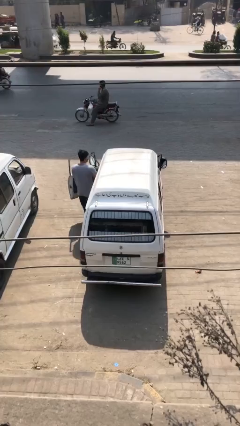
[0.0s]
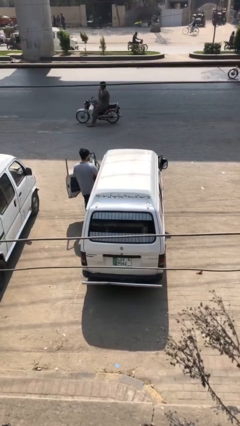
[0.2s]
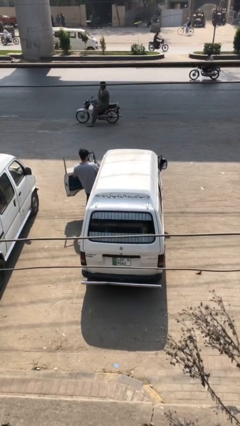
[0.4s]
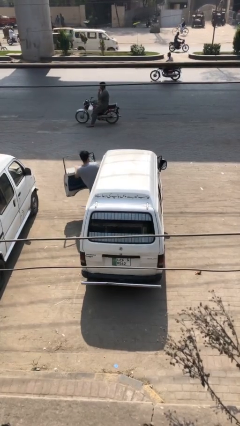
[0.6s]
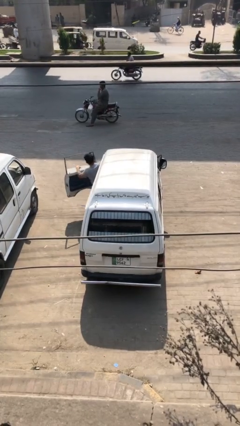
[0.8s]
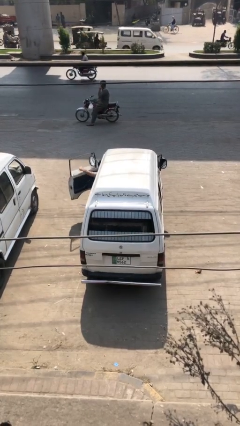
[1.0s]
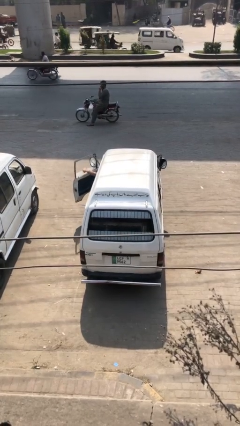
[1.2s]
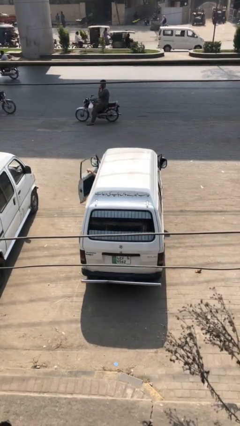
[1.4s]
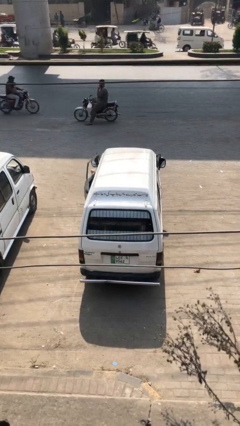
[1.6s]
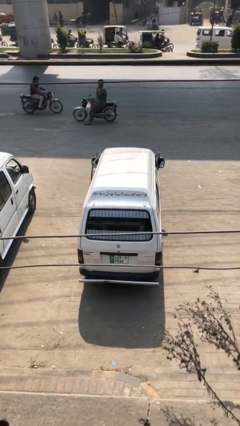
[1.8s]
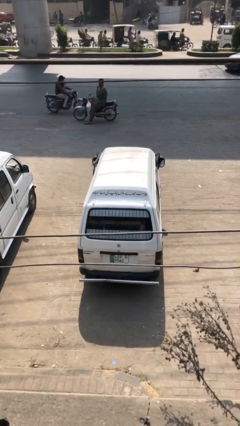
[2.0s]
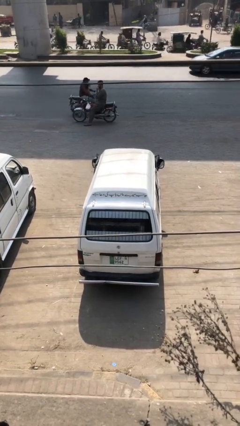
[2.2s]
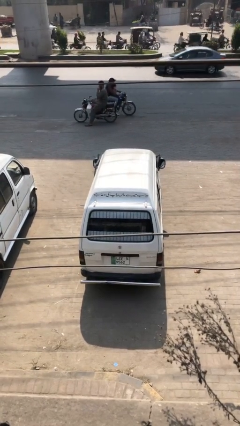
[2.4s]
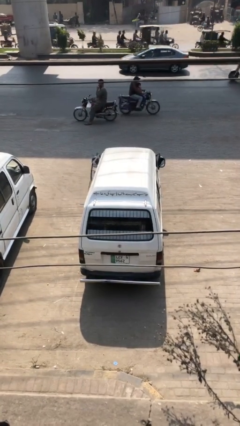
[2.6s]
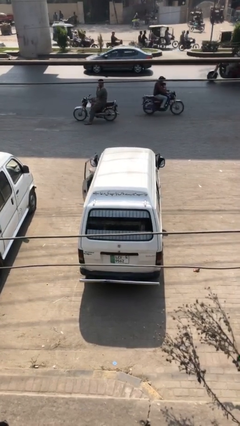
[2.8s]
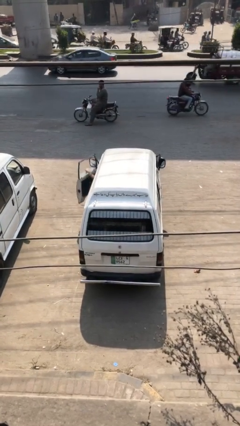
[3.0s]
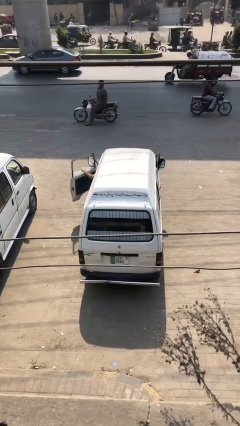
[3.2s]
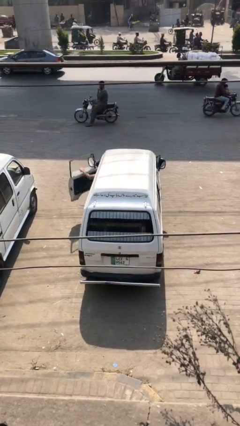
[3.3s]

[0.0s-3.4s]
car picks up person

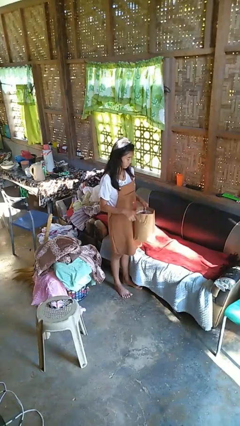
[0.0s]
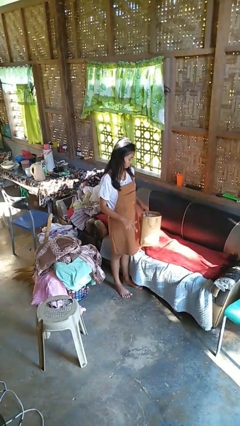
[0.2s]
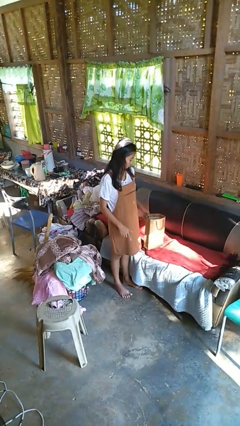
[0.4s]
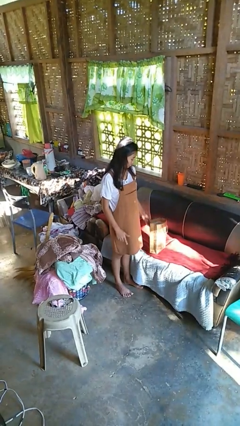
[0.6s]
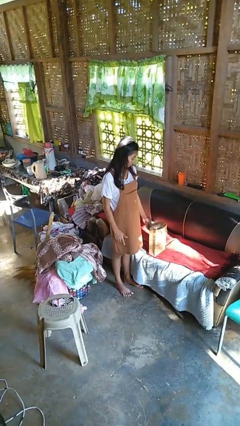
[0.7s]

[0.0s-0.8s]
person puts down object on couch

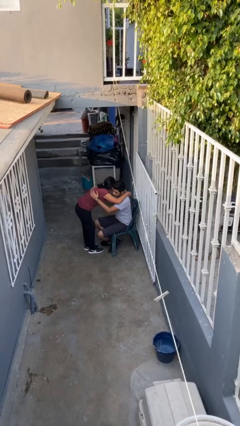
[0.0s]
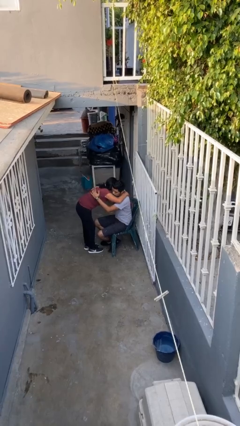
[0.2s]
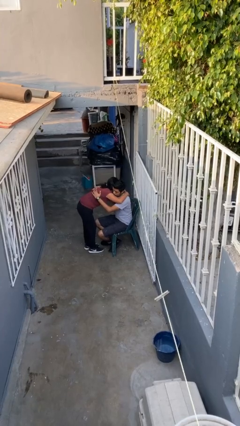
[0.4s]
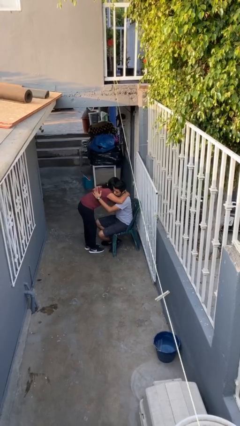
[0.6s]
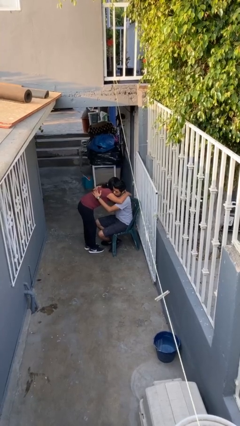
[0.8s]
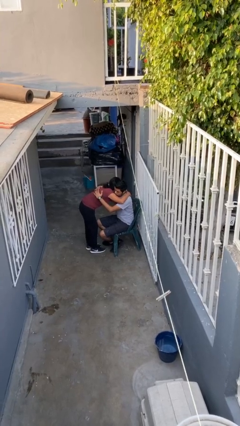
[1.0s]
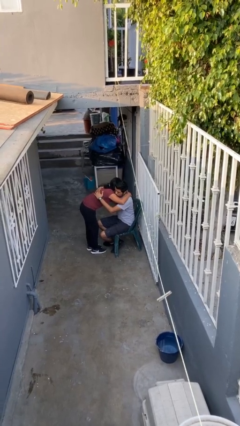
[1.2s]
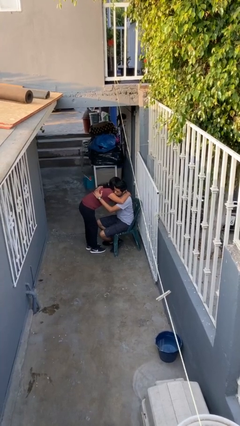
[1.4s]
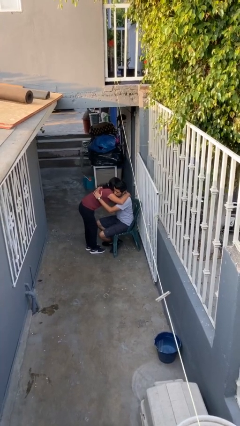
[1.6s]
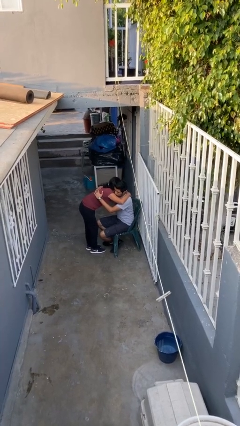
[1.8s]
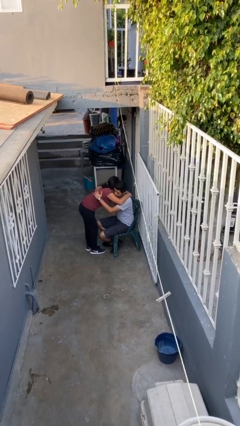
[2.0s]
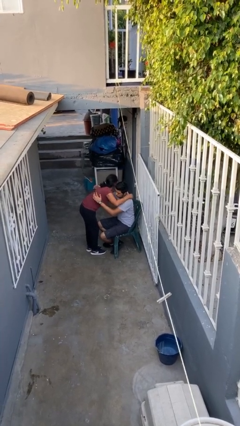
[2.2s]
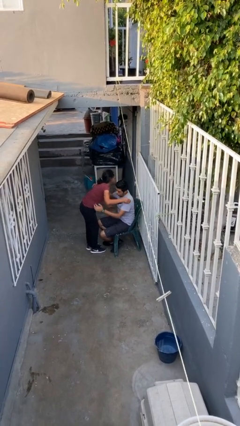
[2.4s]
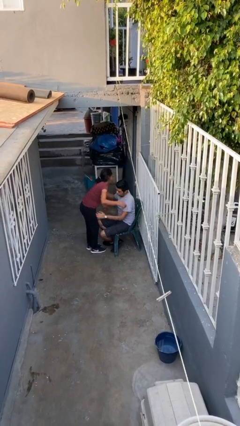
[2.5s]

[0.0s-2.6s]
person embraces person

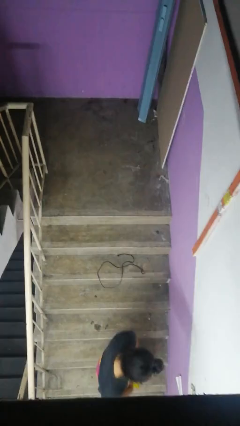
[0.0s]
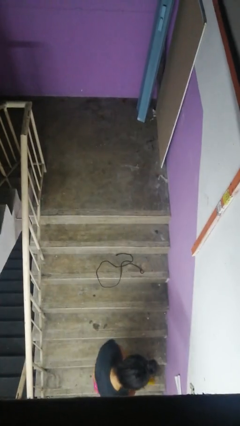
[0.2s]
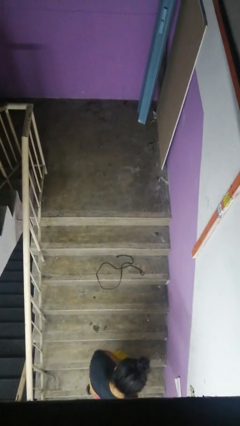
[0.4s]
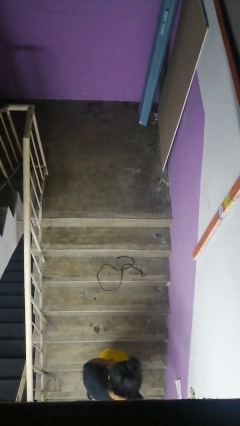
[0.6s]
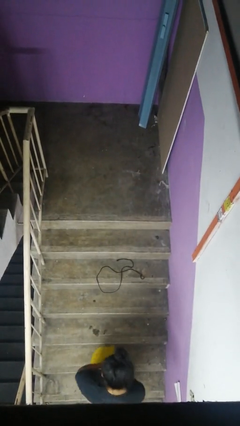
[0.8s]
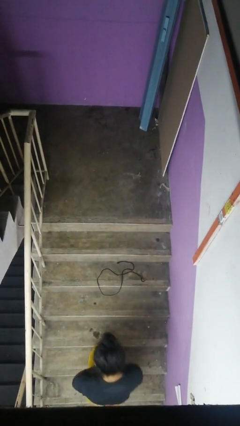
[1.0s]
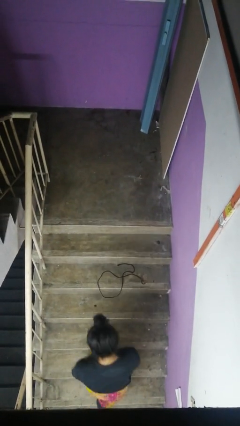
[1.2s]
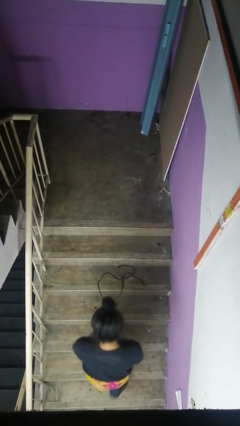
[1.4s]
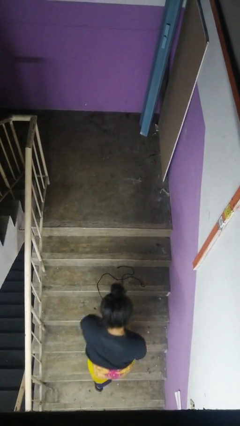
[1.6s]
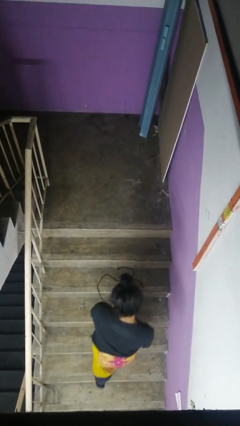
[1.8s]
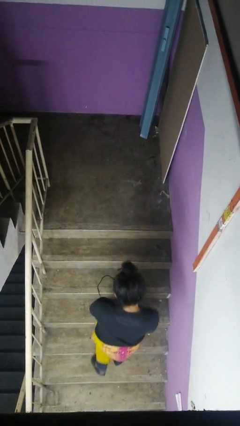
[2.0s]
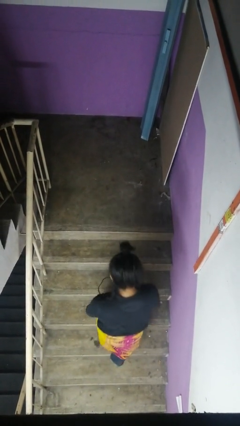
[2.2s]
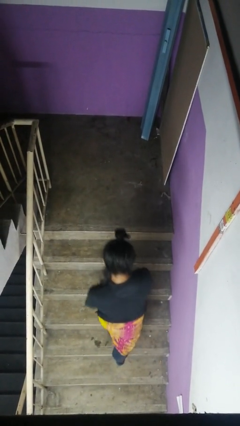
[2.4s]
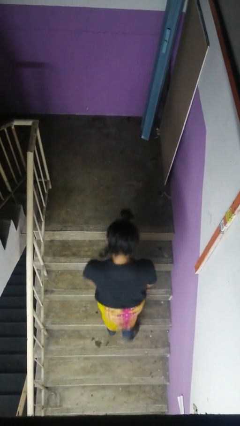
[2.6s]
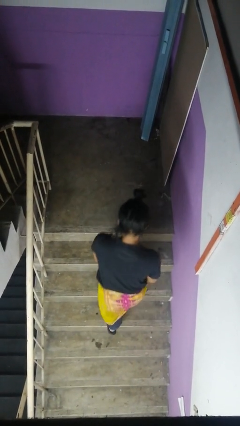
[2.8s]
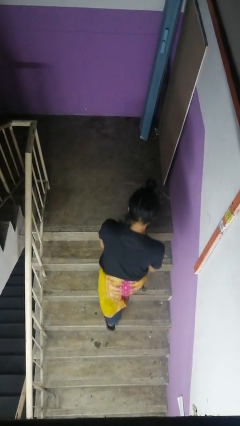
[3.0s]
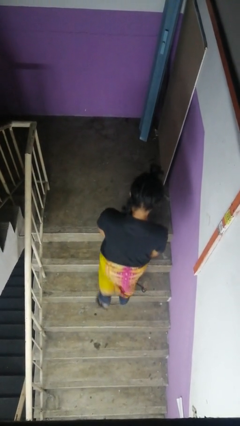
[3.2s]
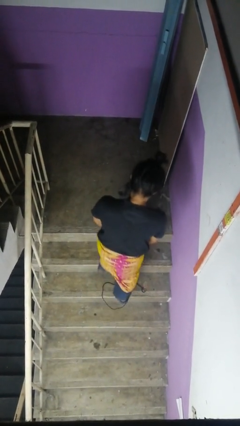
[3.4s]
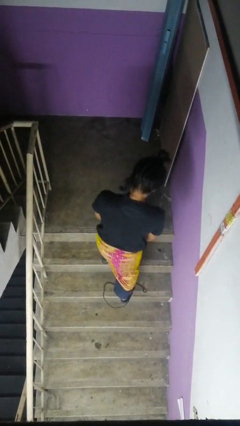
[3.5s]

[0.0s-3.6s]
person climbs up stairs

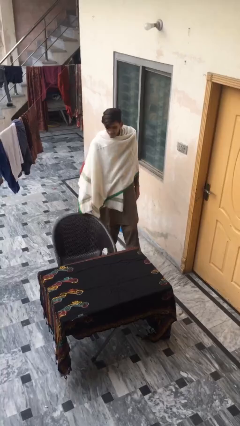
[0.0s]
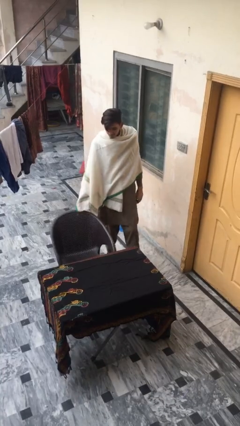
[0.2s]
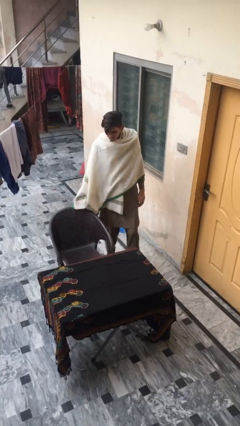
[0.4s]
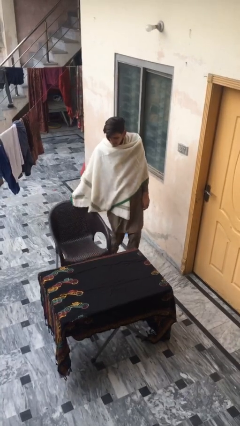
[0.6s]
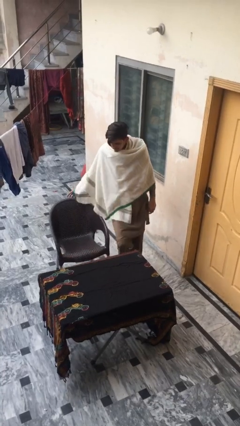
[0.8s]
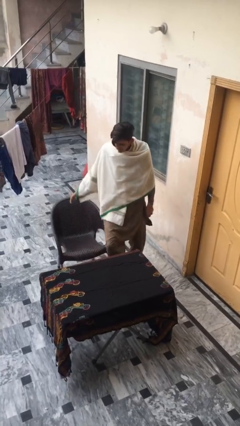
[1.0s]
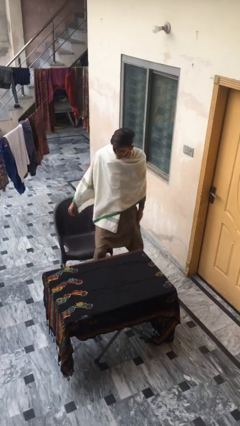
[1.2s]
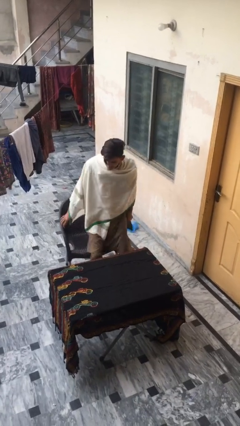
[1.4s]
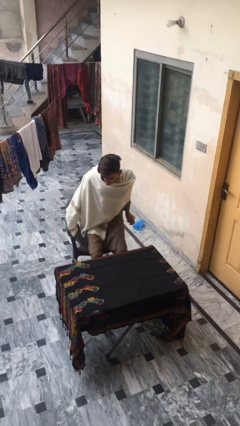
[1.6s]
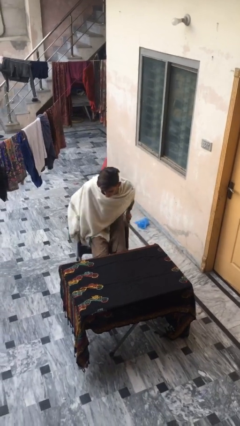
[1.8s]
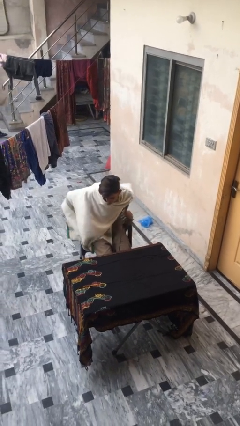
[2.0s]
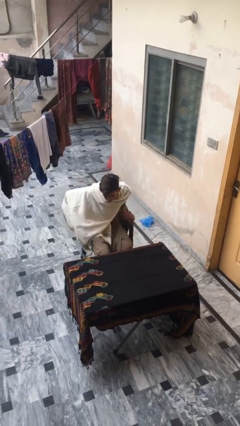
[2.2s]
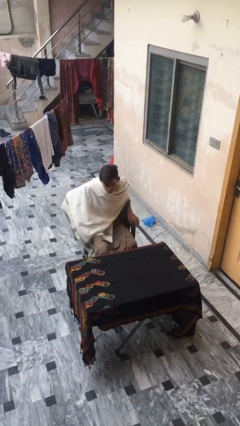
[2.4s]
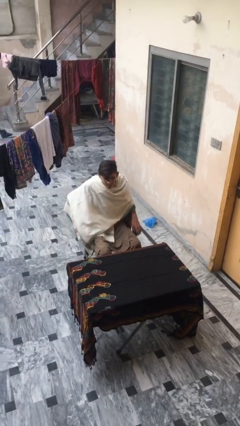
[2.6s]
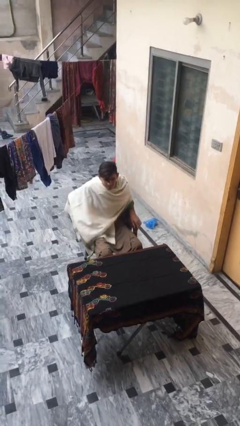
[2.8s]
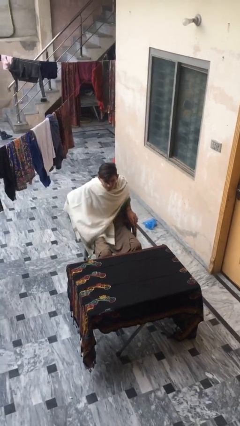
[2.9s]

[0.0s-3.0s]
person sits down

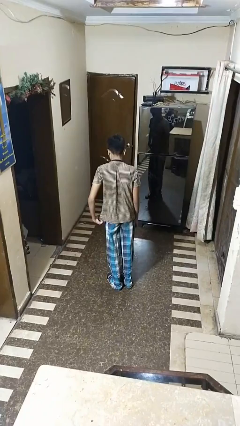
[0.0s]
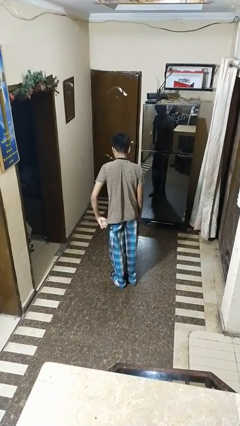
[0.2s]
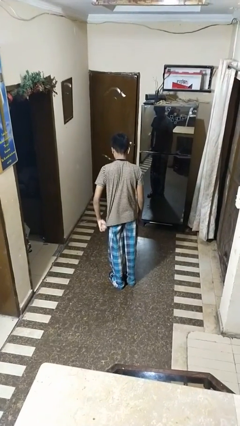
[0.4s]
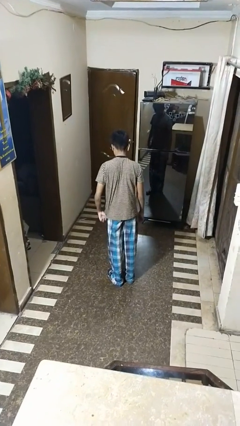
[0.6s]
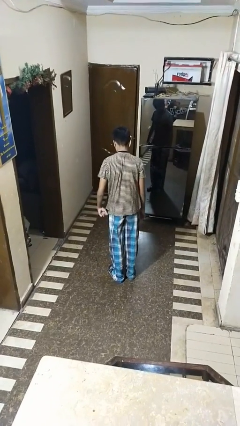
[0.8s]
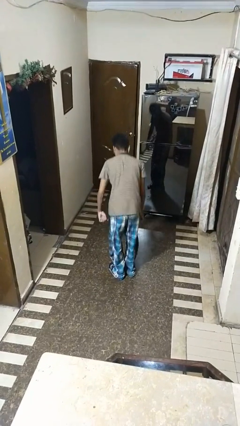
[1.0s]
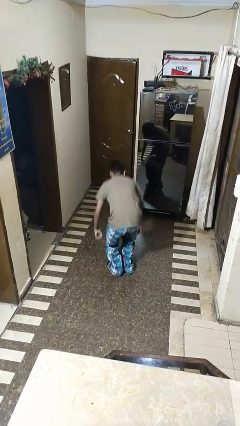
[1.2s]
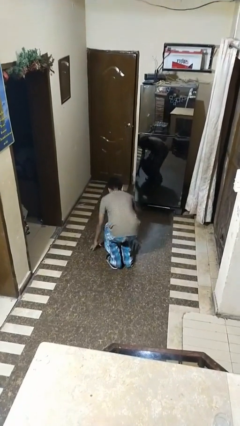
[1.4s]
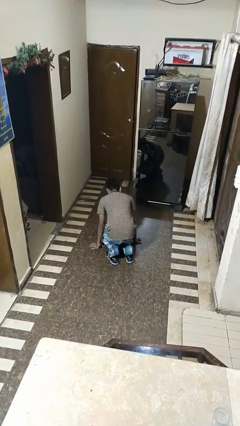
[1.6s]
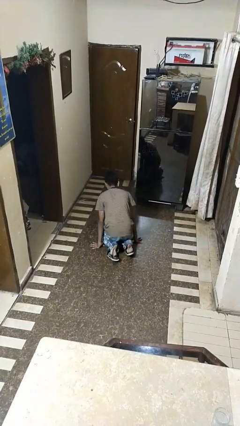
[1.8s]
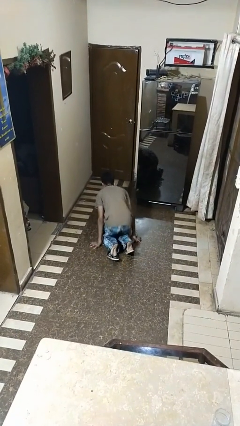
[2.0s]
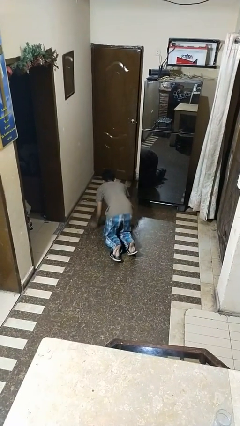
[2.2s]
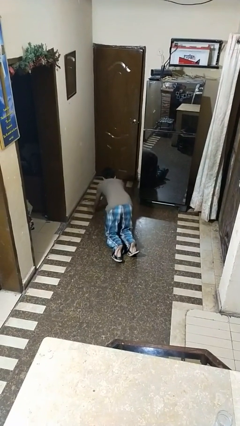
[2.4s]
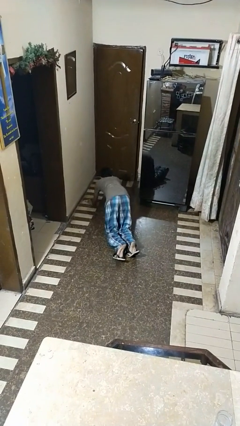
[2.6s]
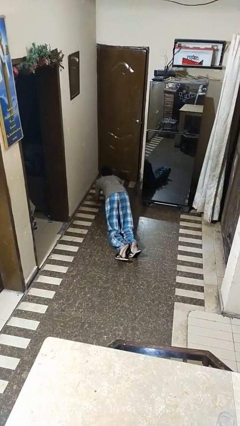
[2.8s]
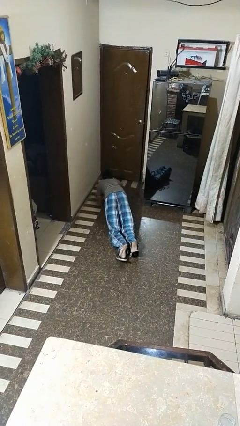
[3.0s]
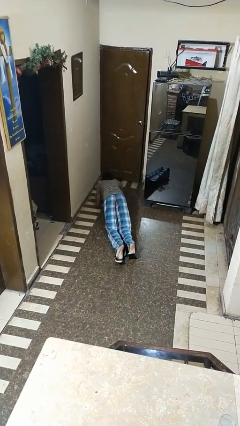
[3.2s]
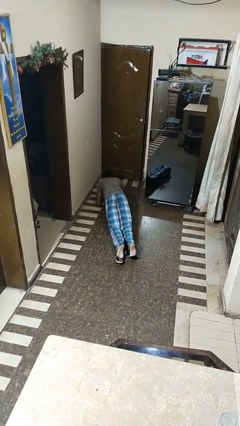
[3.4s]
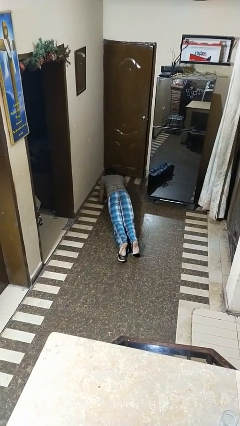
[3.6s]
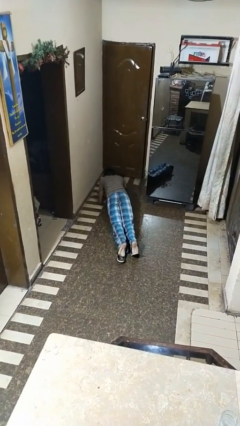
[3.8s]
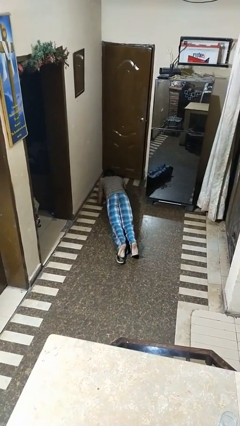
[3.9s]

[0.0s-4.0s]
person exercises with plank

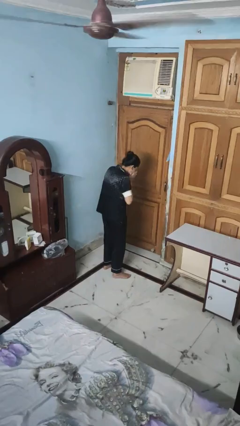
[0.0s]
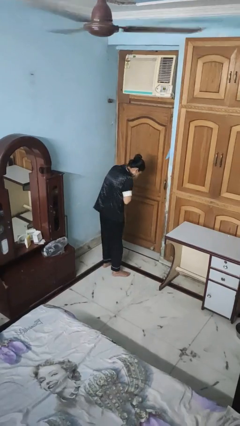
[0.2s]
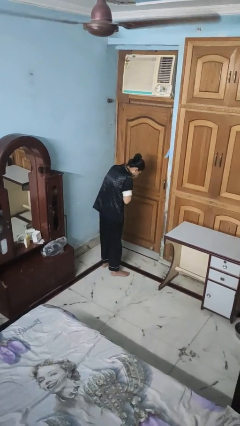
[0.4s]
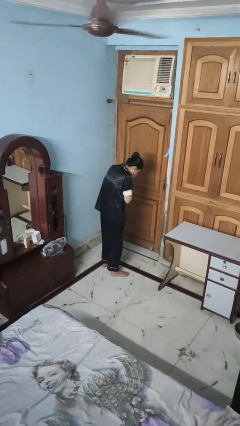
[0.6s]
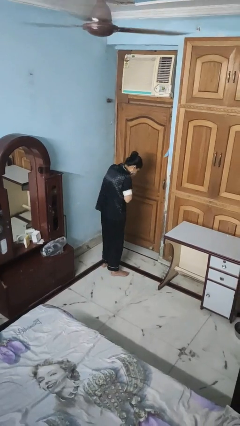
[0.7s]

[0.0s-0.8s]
person sneezes into hand
